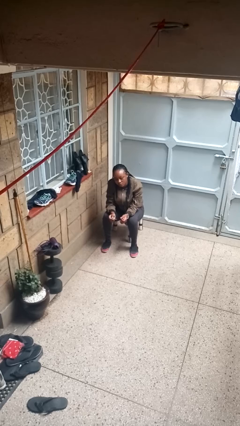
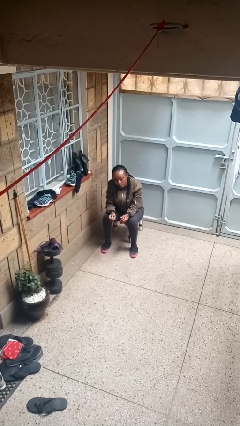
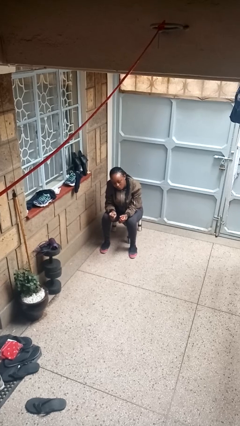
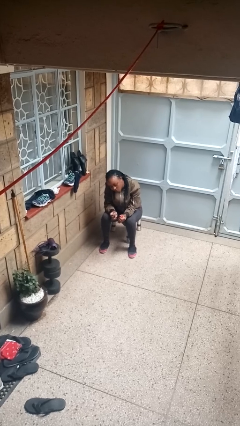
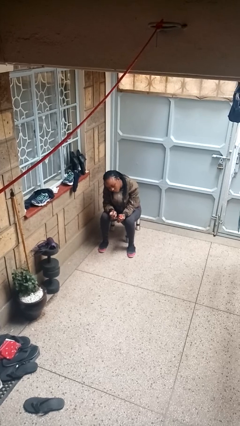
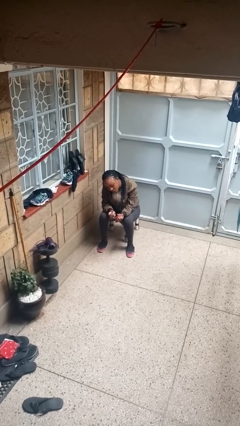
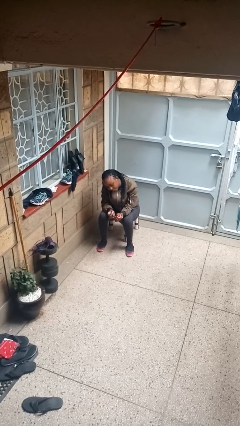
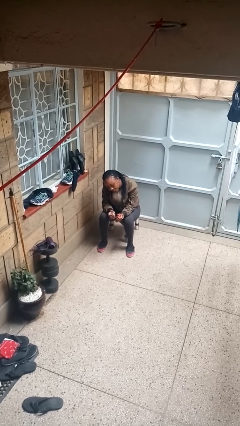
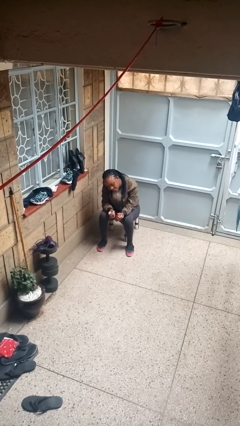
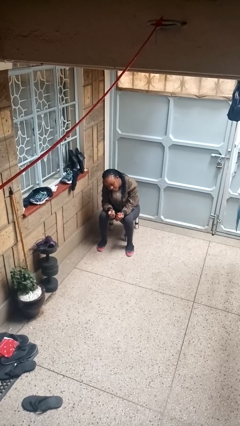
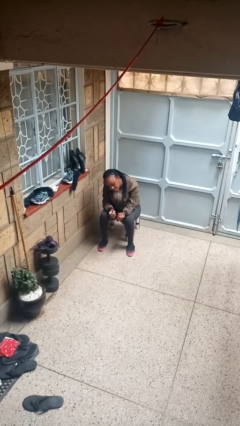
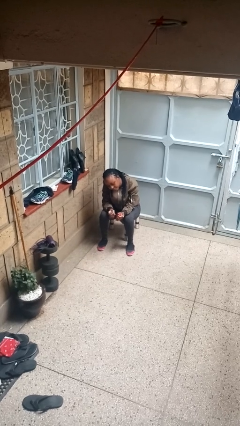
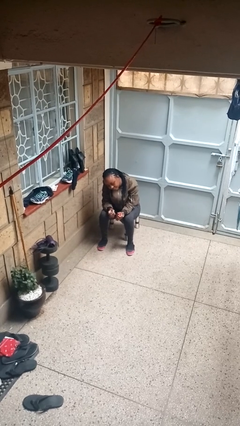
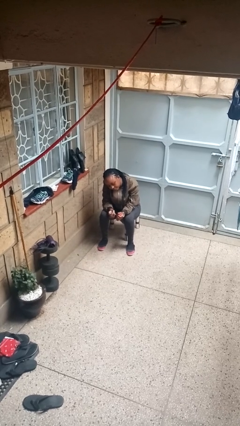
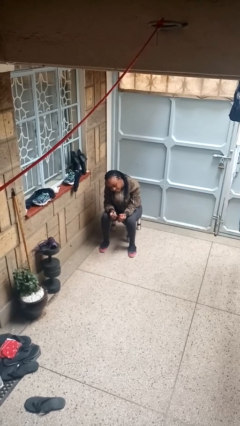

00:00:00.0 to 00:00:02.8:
person paints fingernails

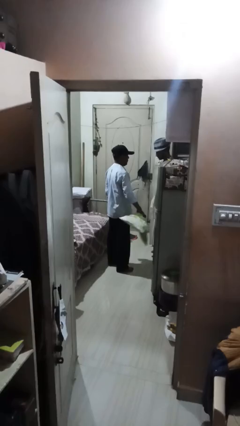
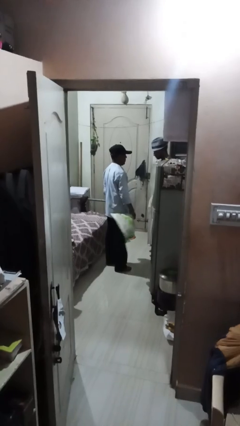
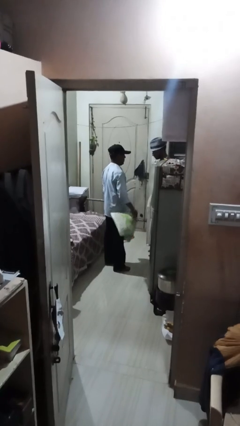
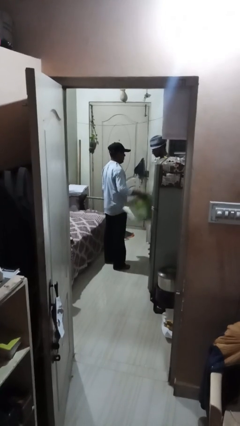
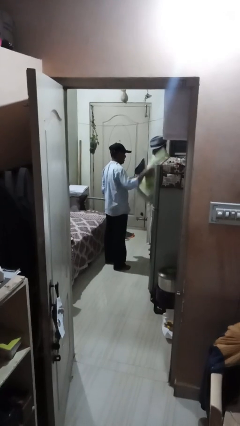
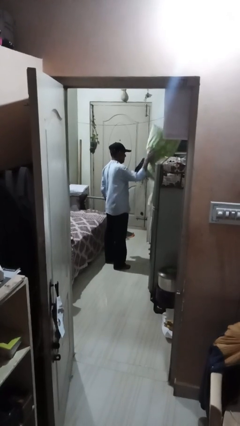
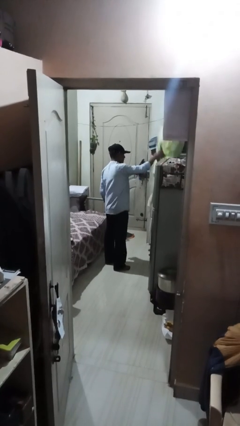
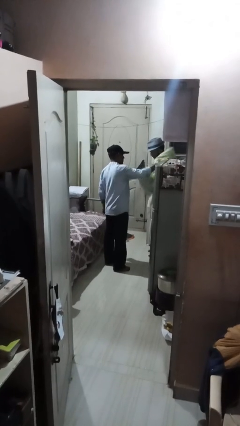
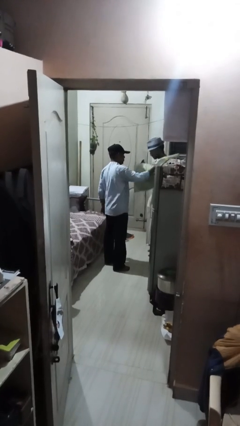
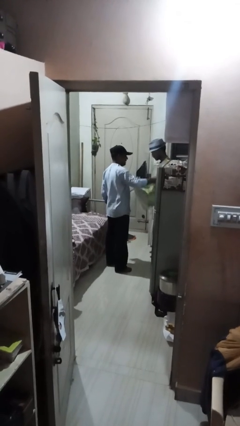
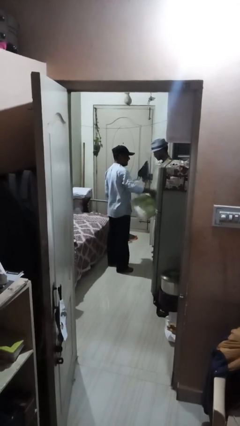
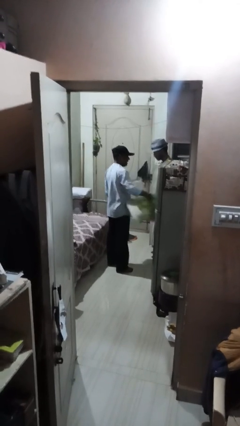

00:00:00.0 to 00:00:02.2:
person hits person with pillow

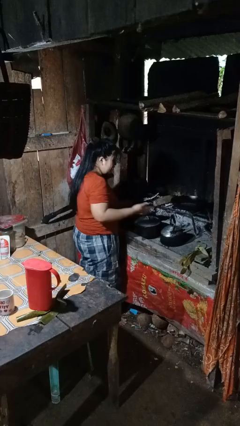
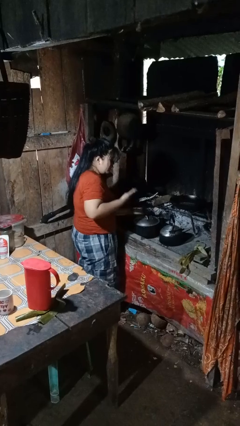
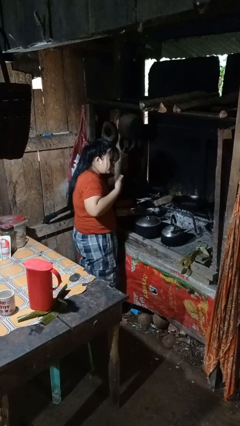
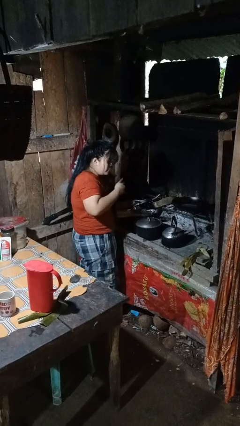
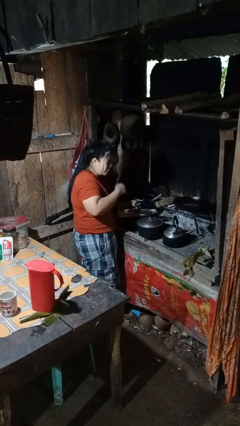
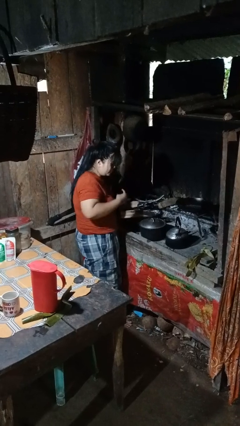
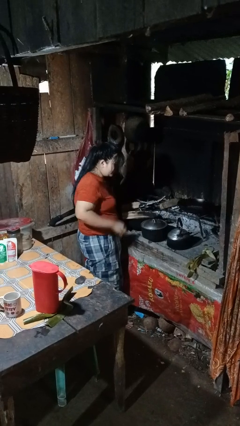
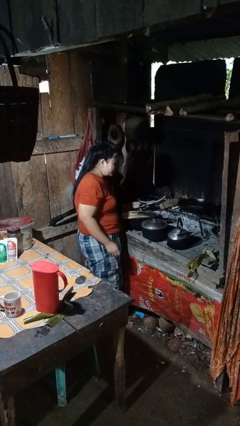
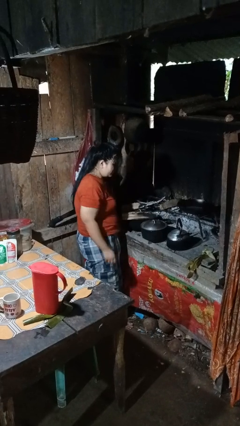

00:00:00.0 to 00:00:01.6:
person burns hand

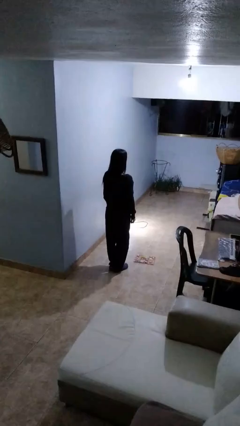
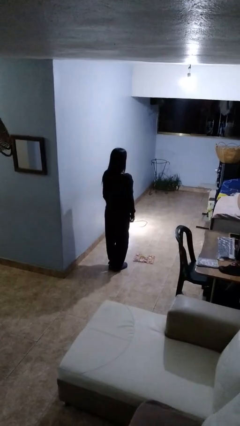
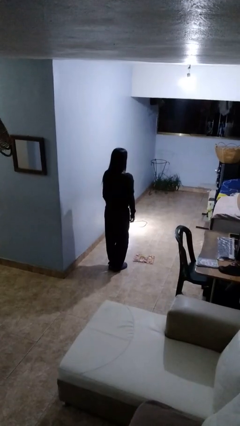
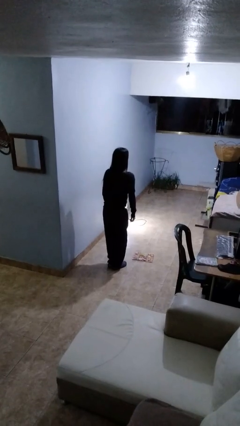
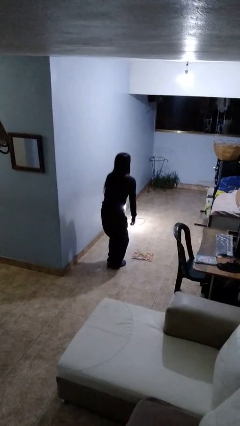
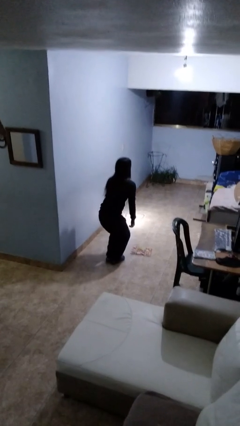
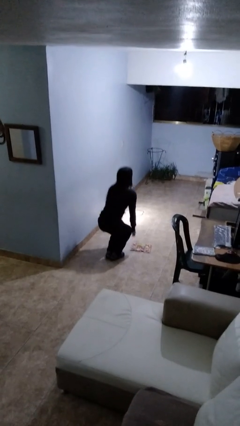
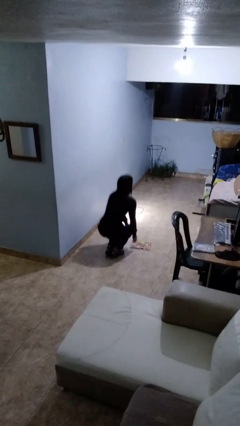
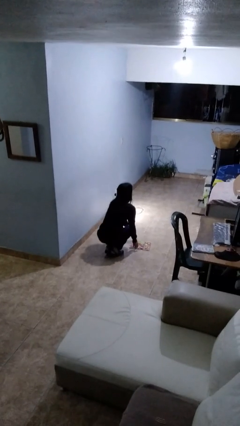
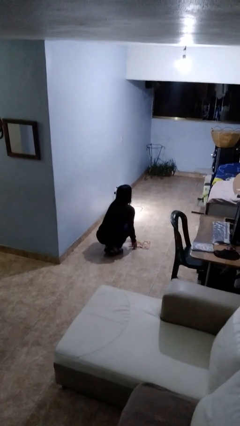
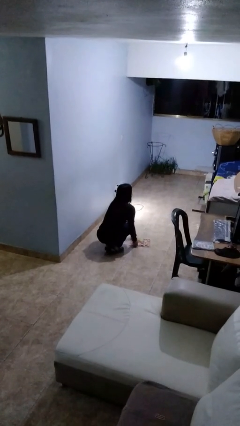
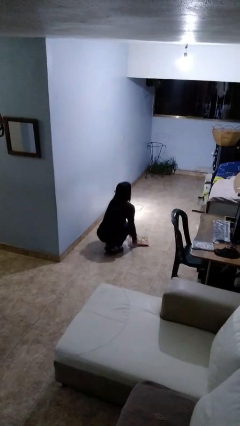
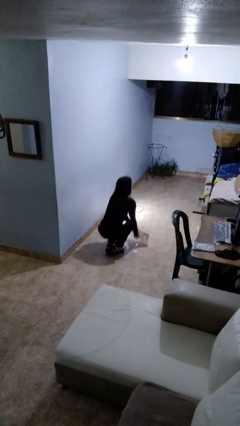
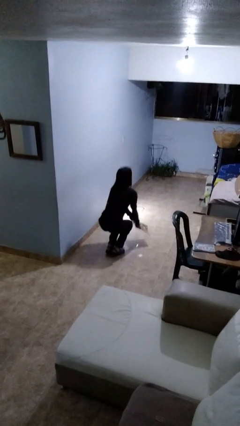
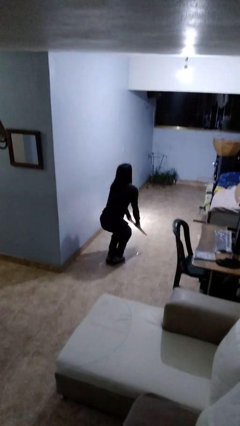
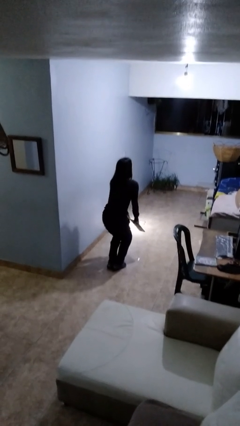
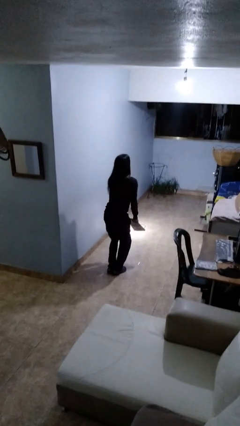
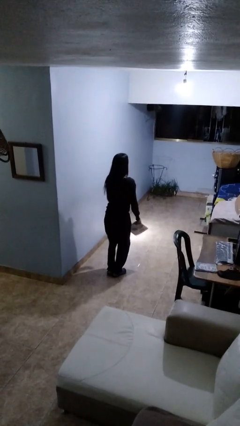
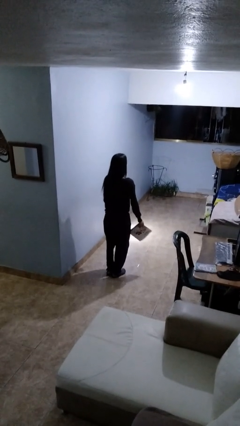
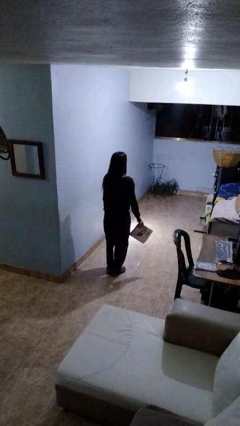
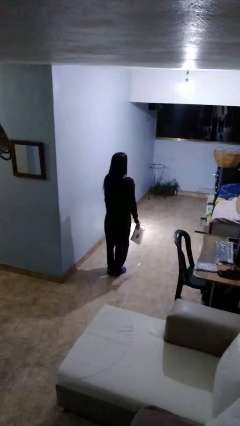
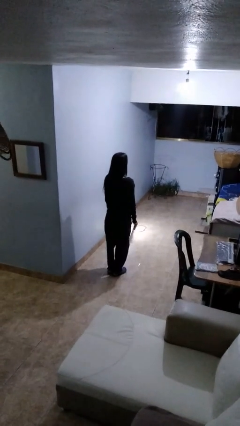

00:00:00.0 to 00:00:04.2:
person picks up object from floor

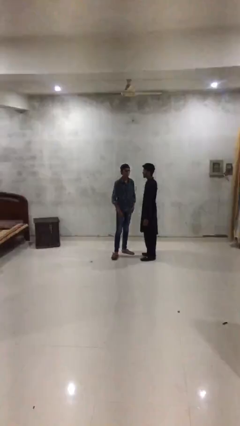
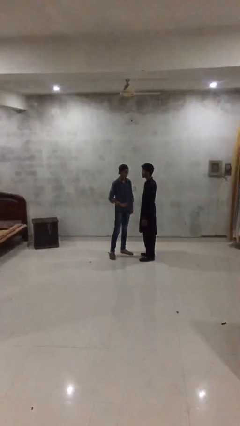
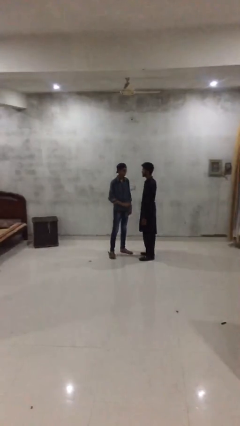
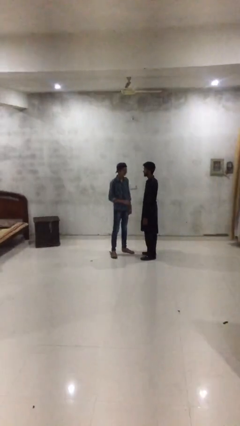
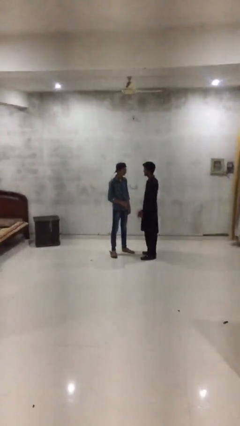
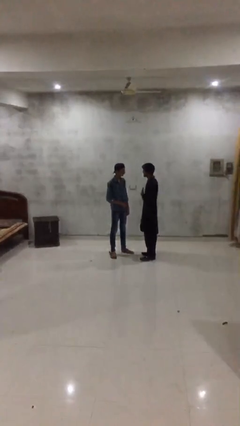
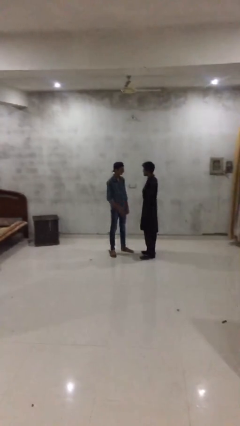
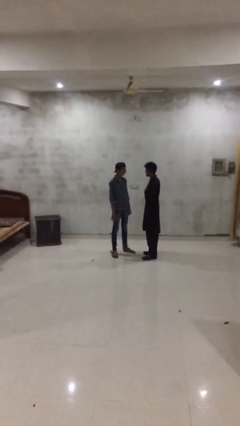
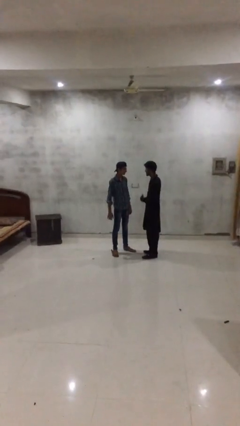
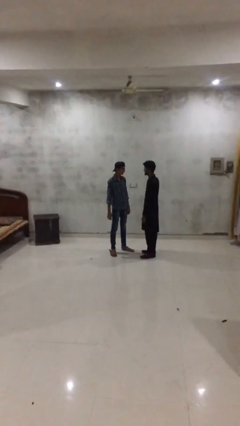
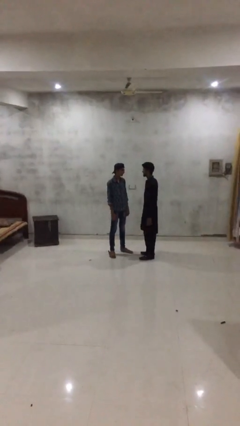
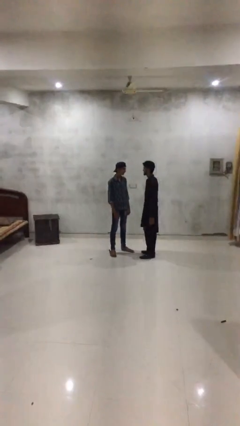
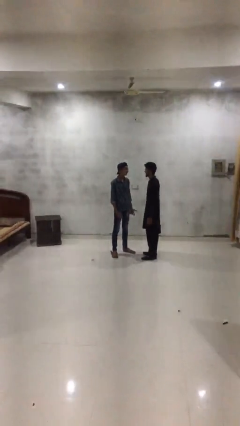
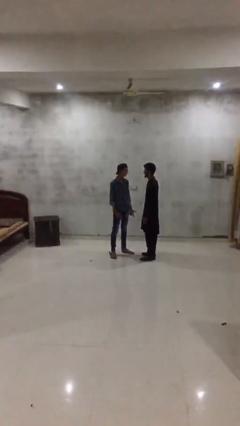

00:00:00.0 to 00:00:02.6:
person talks to person

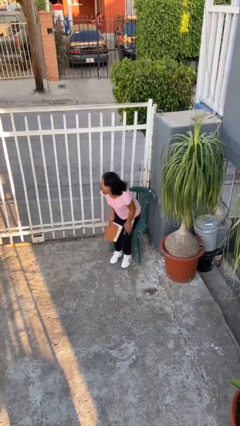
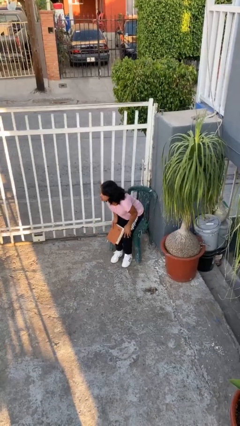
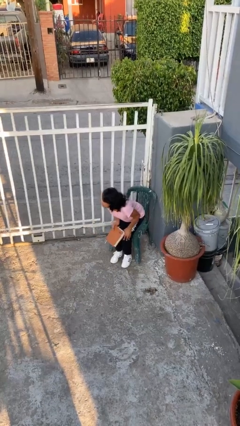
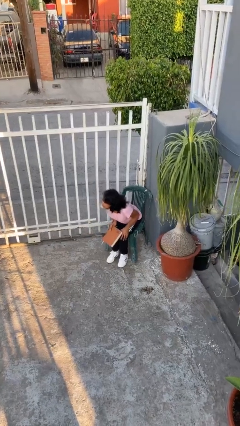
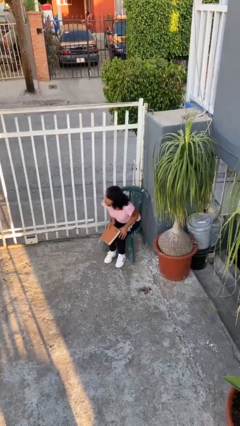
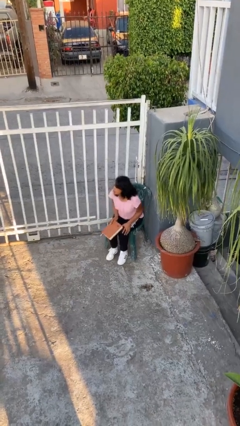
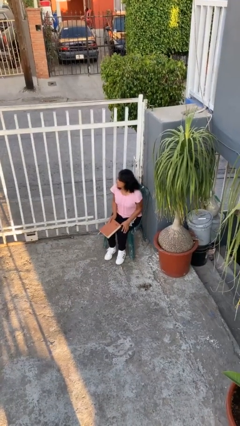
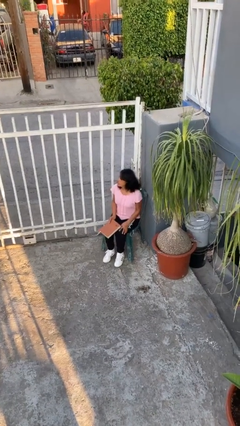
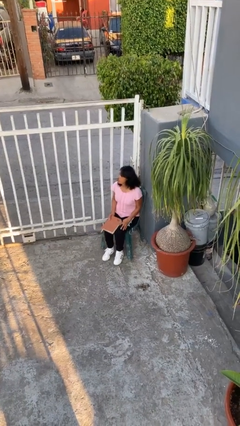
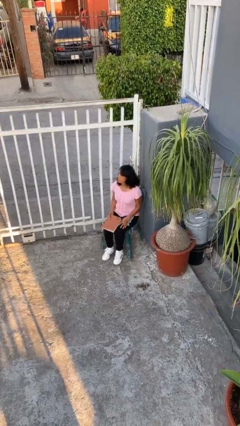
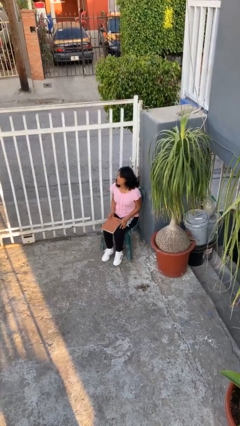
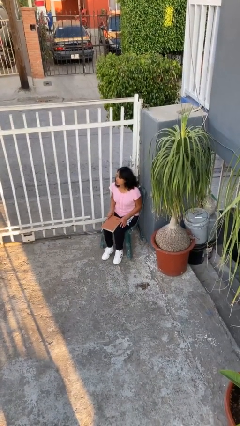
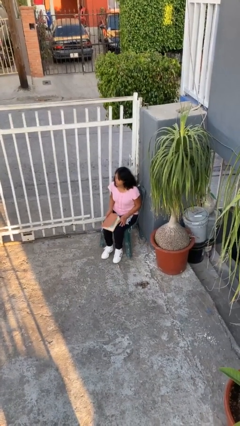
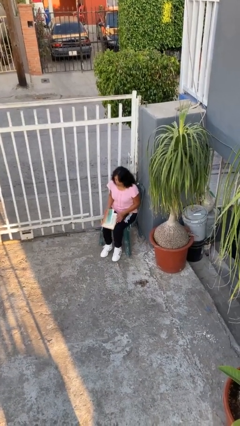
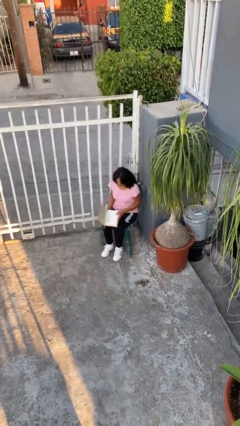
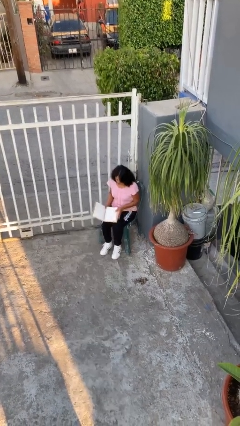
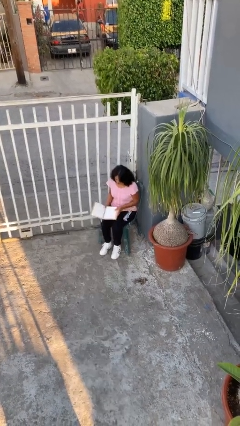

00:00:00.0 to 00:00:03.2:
person sits down

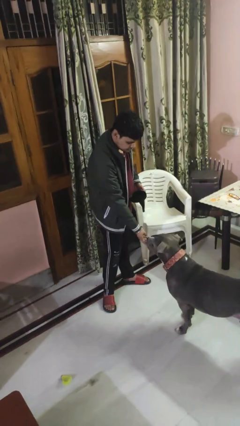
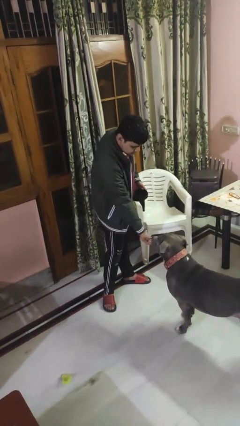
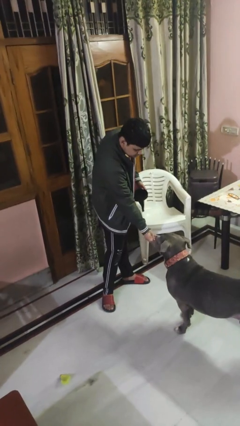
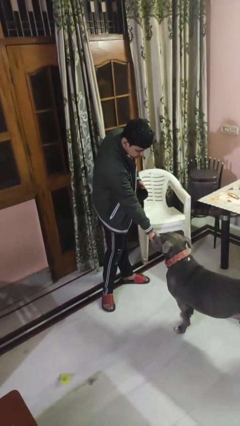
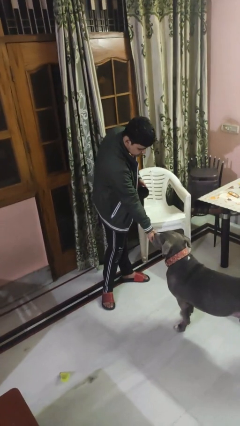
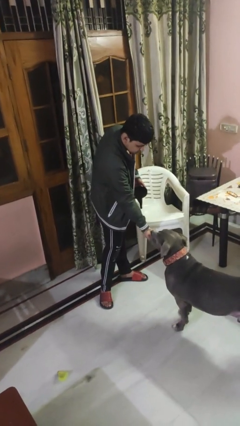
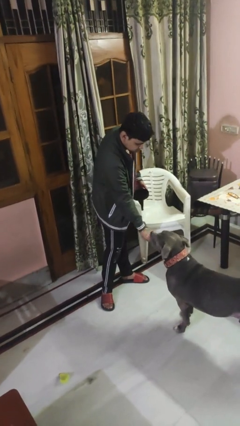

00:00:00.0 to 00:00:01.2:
person feeds dog
